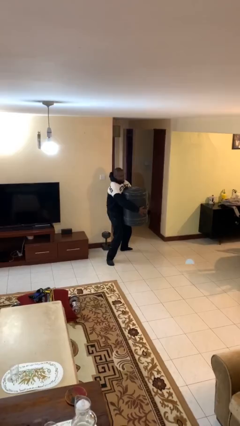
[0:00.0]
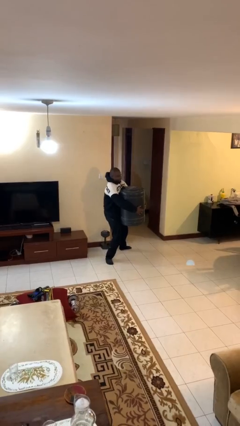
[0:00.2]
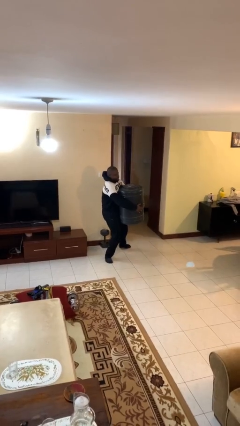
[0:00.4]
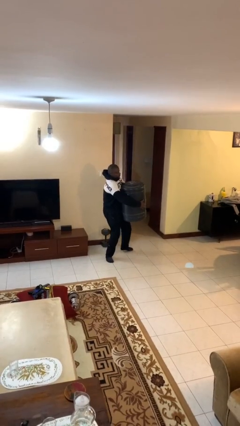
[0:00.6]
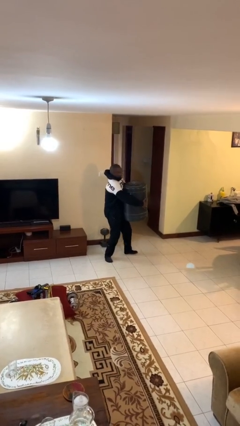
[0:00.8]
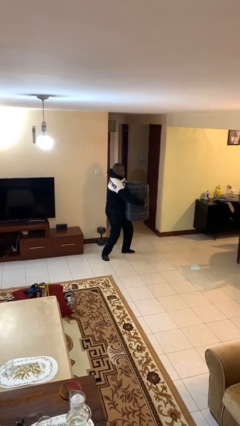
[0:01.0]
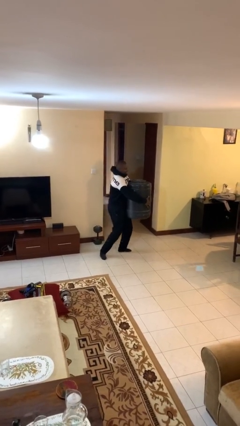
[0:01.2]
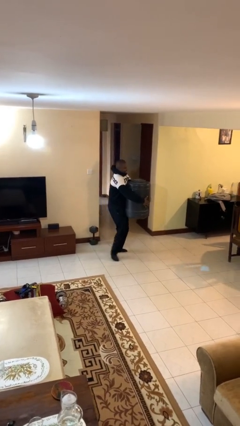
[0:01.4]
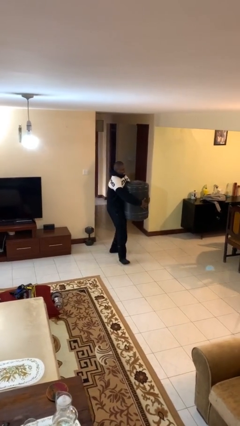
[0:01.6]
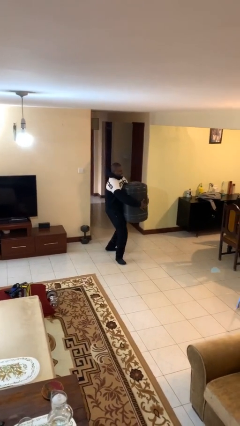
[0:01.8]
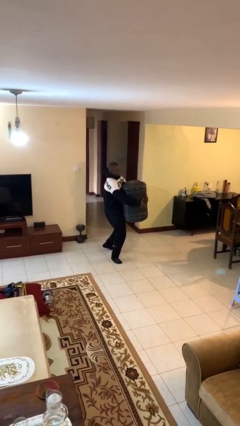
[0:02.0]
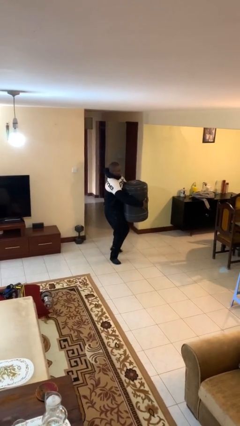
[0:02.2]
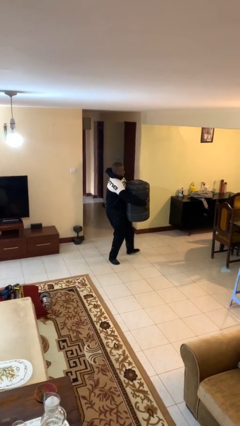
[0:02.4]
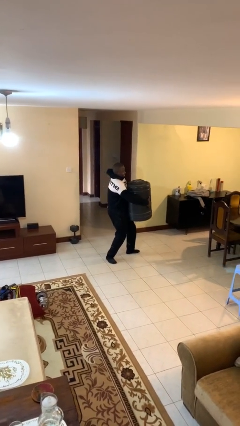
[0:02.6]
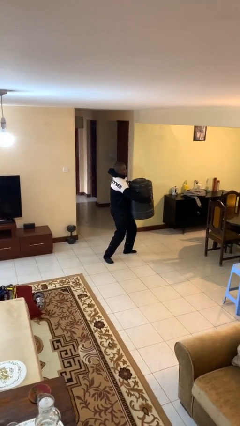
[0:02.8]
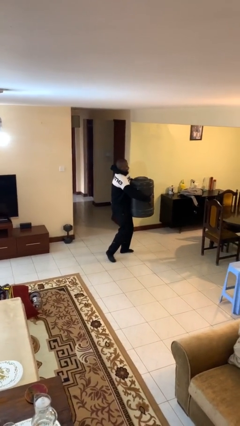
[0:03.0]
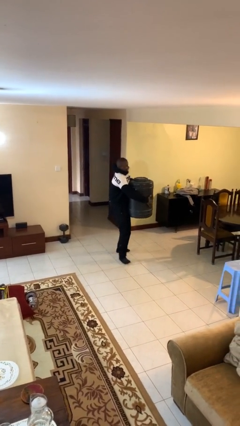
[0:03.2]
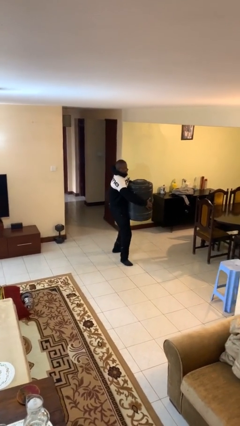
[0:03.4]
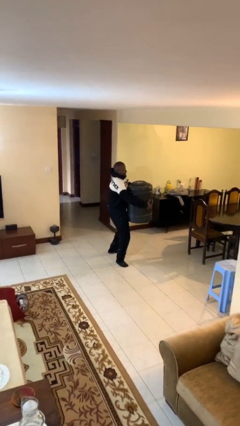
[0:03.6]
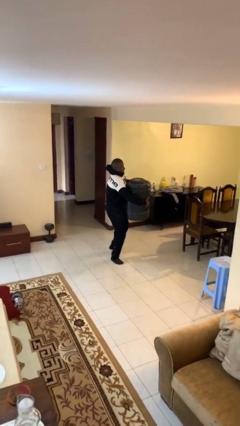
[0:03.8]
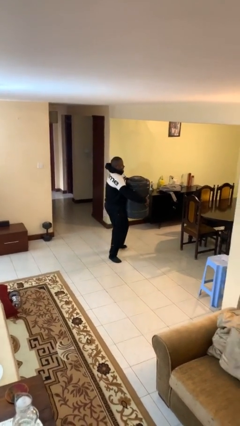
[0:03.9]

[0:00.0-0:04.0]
person carries heavy object

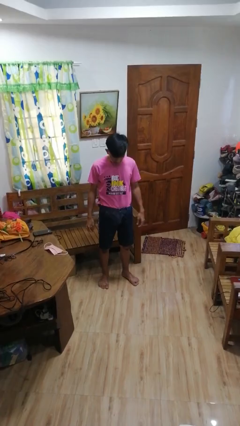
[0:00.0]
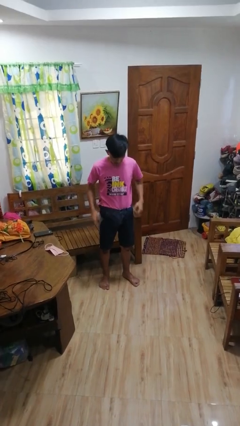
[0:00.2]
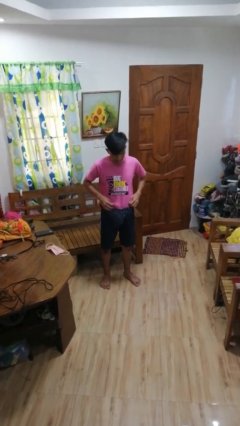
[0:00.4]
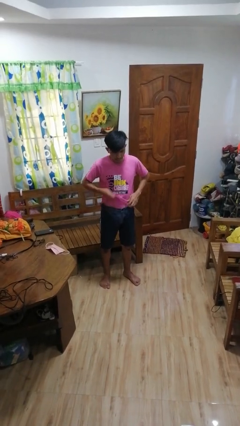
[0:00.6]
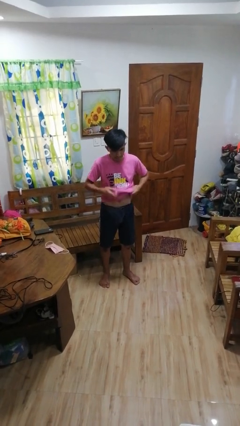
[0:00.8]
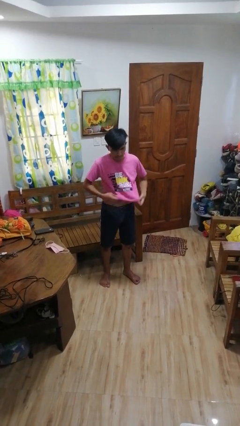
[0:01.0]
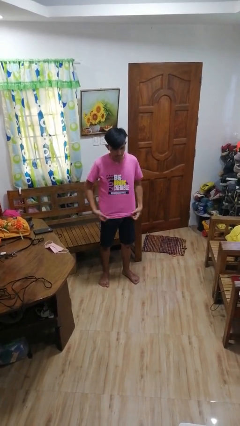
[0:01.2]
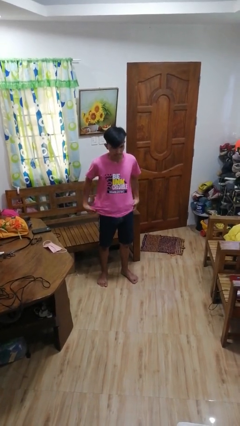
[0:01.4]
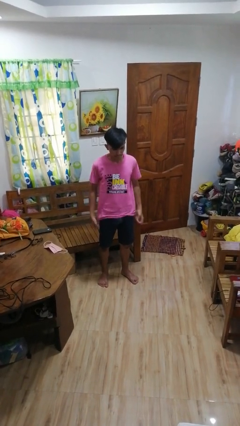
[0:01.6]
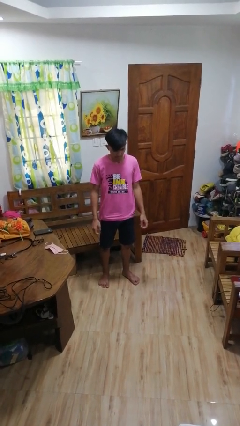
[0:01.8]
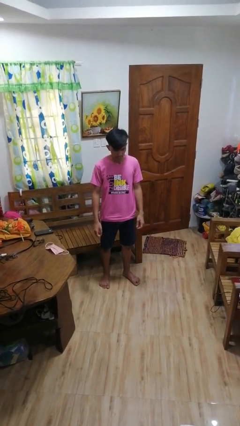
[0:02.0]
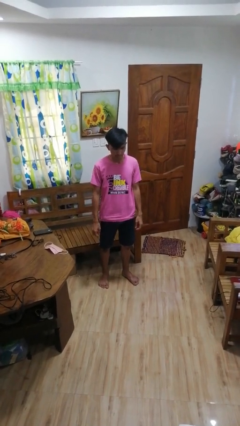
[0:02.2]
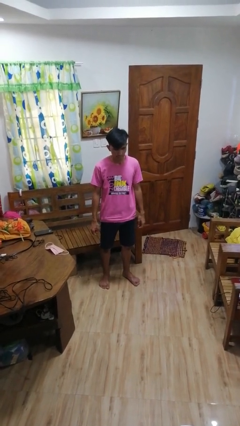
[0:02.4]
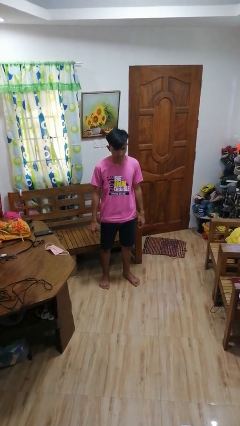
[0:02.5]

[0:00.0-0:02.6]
person untucks shirt

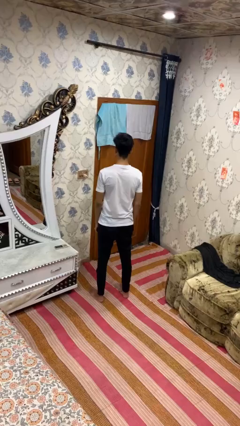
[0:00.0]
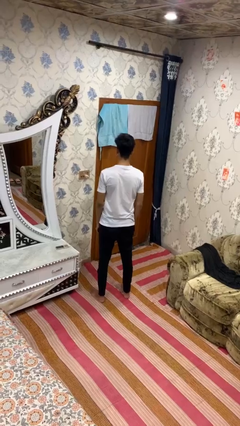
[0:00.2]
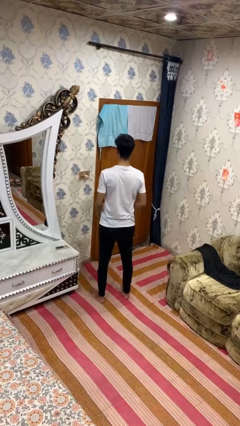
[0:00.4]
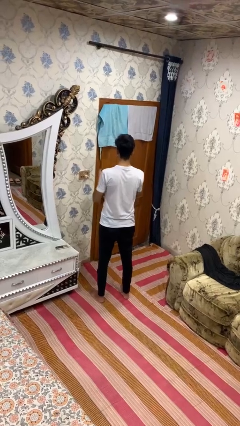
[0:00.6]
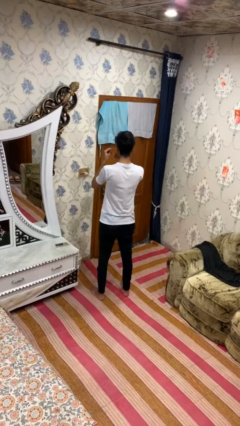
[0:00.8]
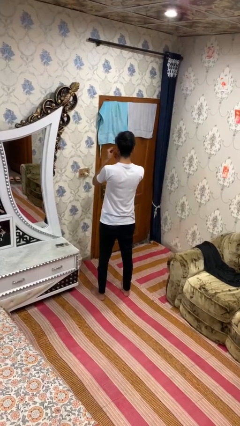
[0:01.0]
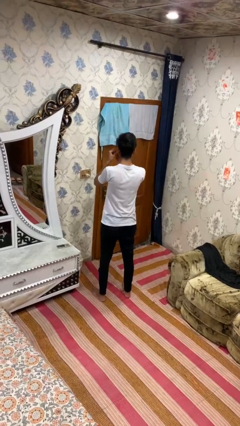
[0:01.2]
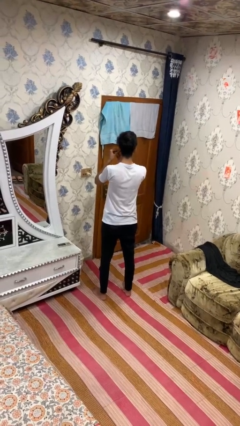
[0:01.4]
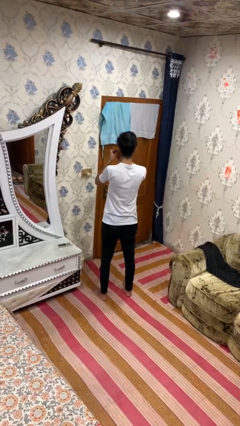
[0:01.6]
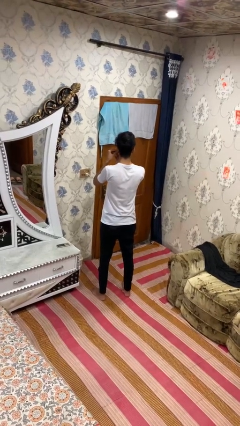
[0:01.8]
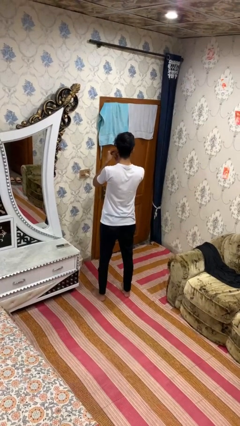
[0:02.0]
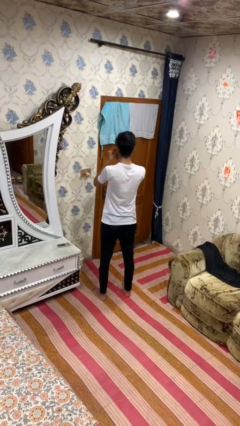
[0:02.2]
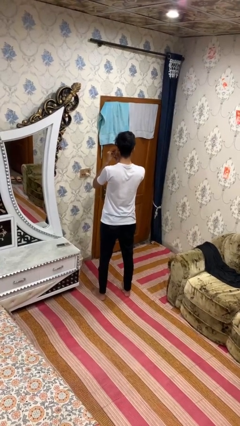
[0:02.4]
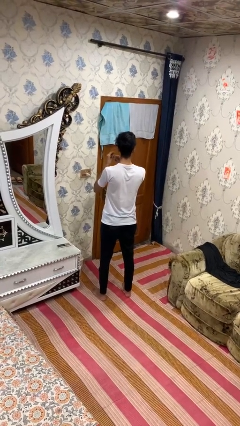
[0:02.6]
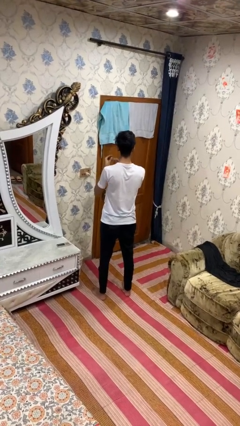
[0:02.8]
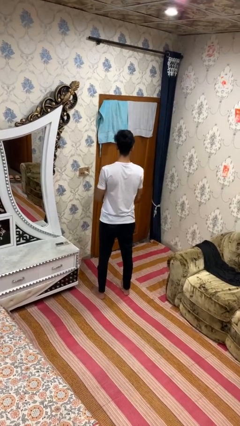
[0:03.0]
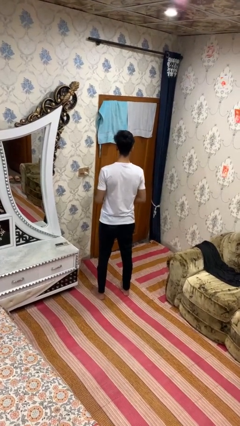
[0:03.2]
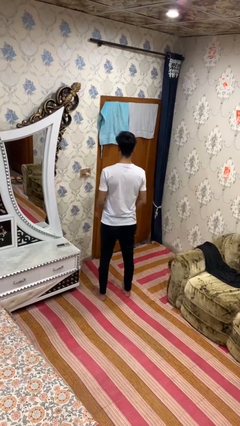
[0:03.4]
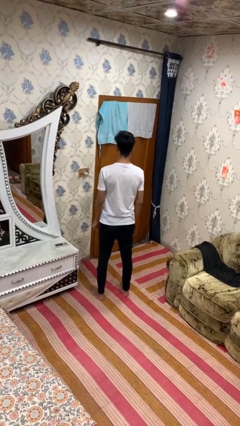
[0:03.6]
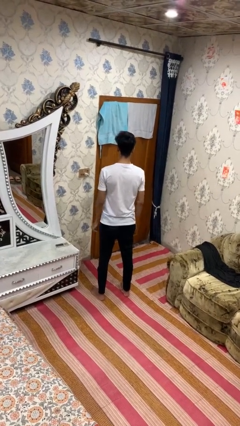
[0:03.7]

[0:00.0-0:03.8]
person takes off earrings

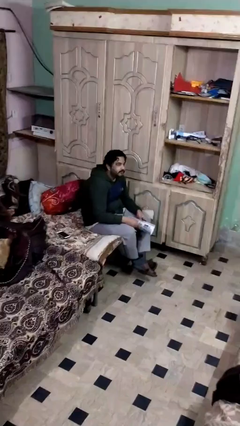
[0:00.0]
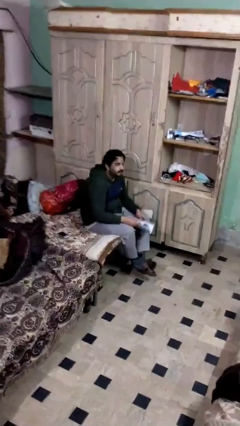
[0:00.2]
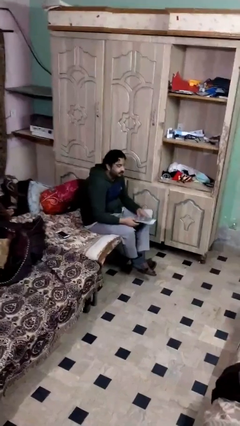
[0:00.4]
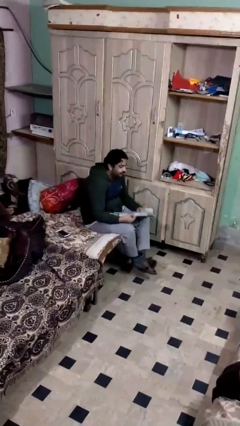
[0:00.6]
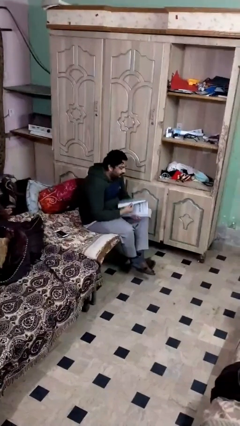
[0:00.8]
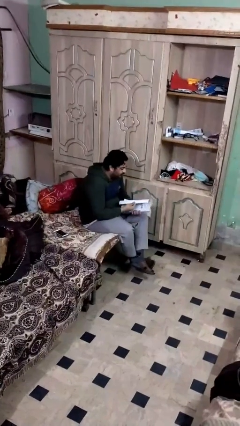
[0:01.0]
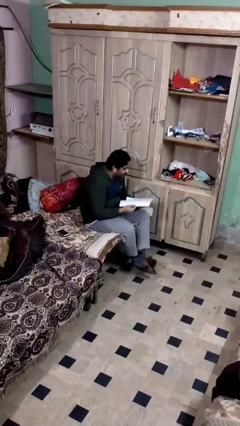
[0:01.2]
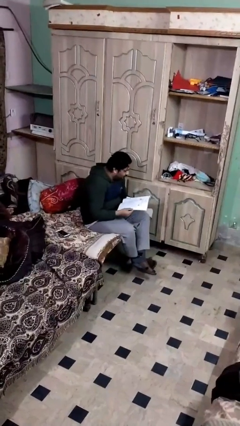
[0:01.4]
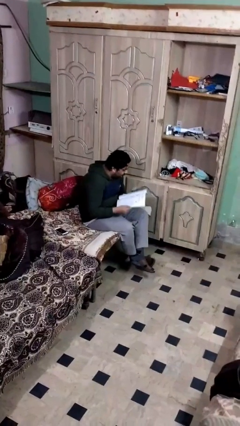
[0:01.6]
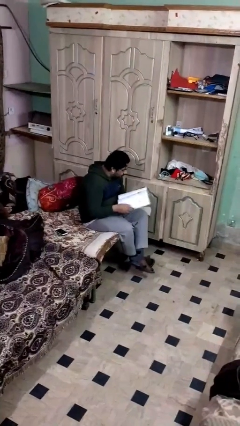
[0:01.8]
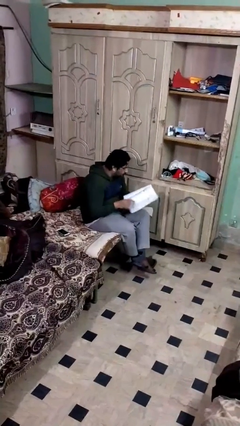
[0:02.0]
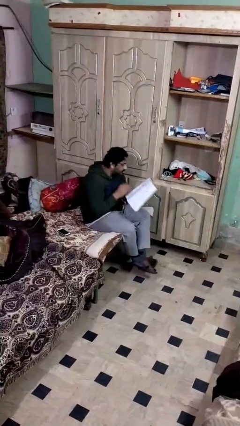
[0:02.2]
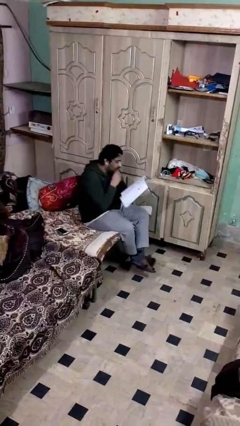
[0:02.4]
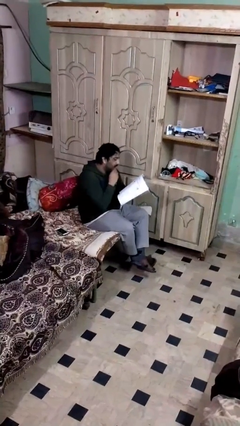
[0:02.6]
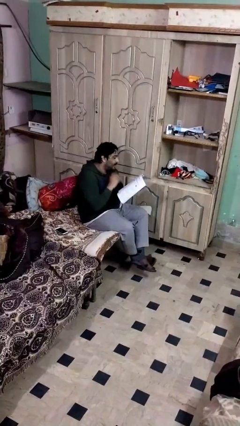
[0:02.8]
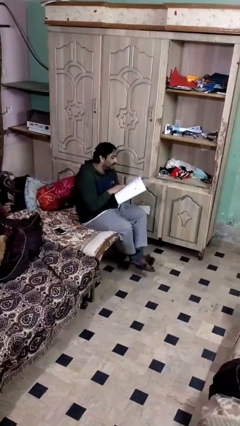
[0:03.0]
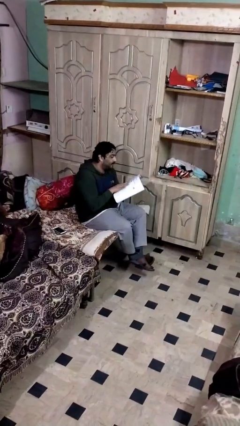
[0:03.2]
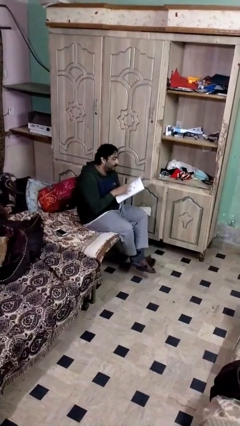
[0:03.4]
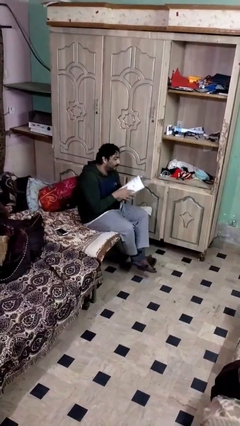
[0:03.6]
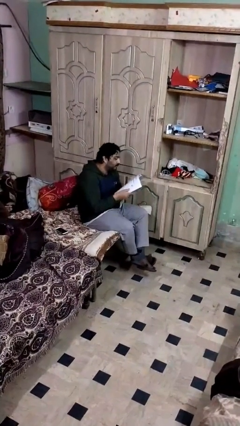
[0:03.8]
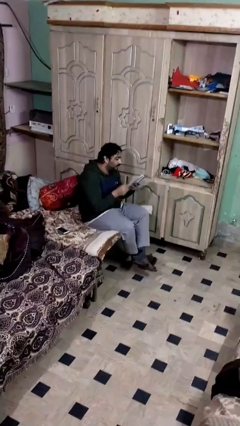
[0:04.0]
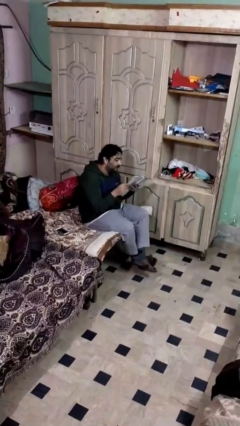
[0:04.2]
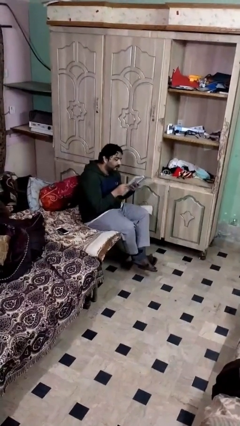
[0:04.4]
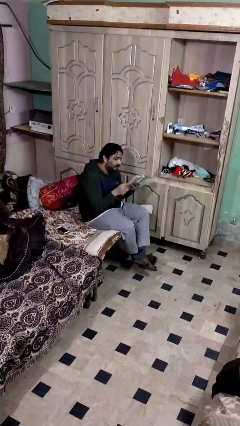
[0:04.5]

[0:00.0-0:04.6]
person reads document

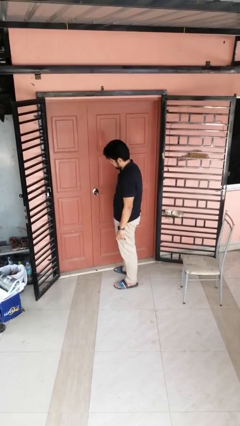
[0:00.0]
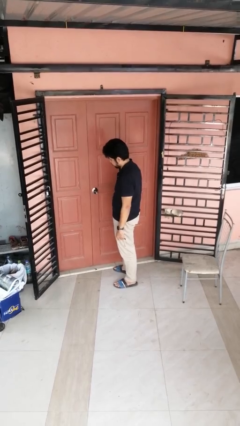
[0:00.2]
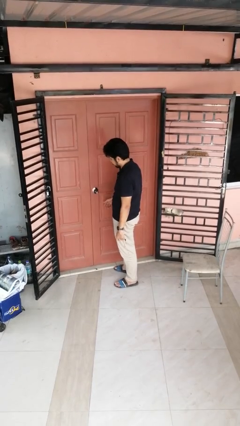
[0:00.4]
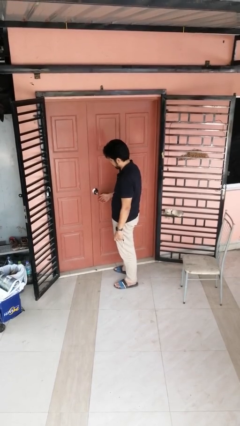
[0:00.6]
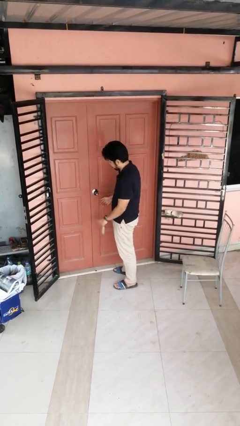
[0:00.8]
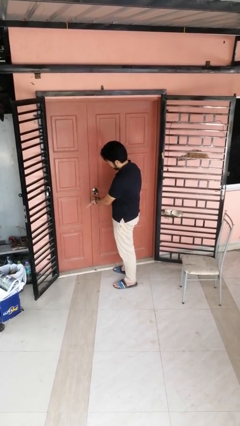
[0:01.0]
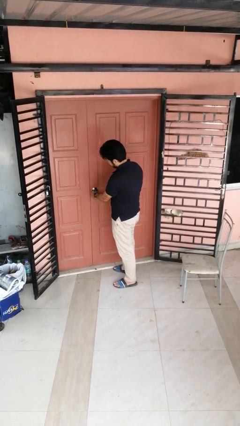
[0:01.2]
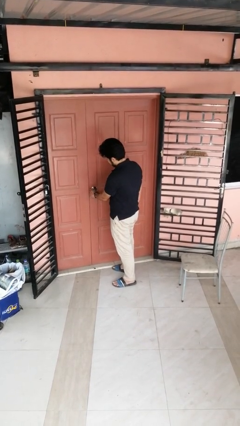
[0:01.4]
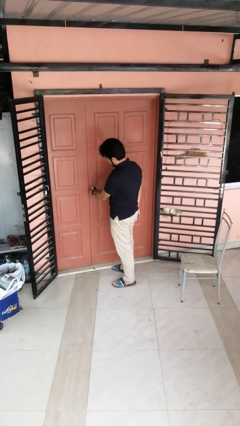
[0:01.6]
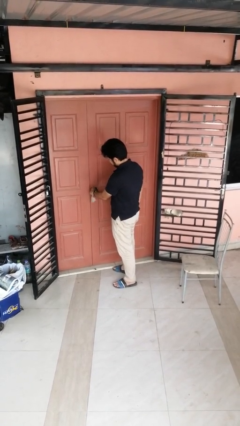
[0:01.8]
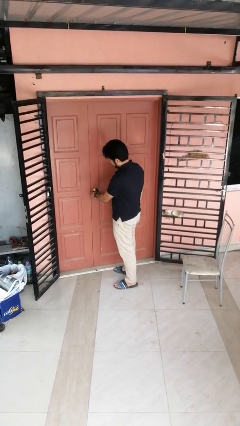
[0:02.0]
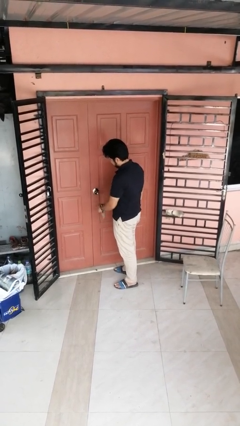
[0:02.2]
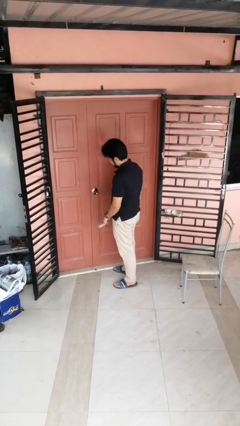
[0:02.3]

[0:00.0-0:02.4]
person unlocks door with keys

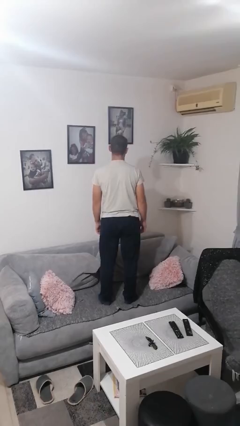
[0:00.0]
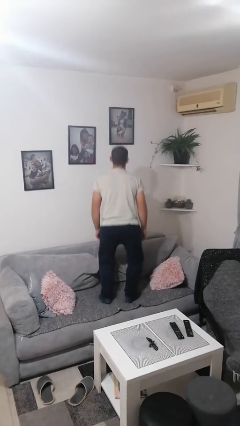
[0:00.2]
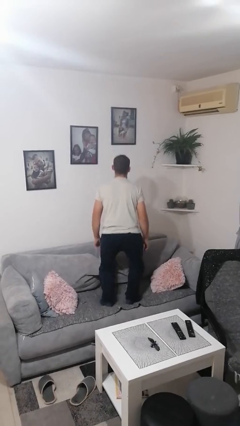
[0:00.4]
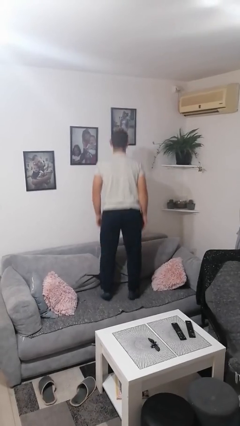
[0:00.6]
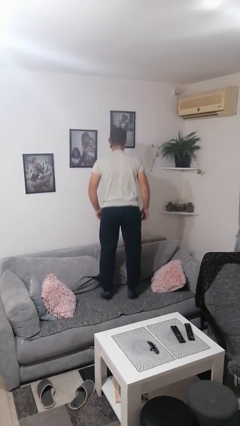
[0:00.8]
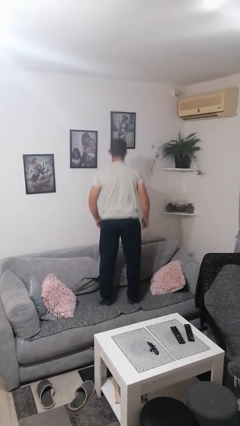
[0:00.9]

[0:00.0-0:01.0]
person jumps on couch
